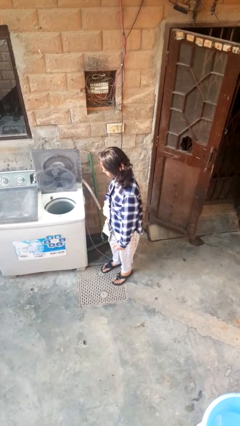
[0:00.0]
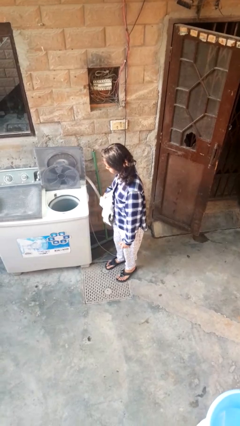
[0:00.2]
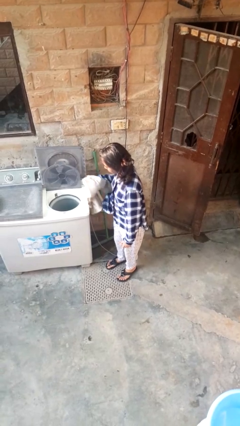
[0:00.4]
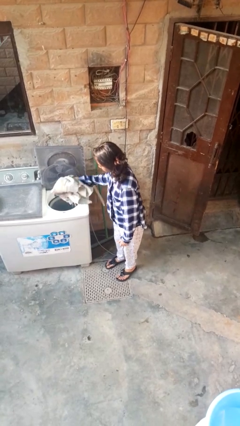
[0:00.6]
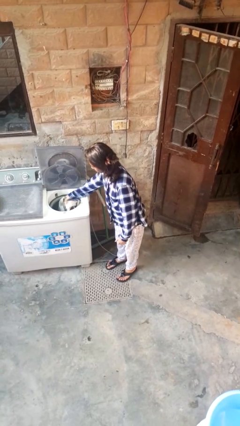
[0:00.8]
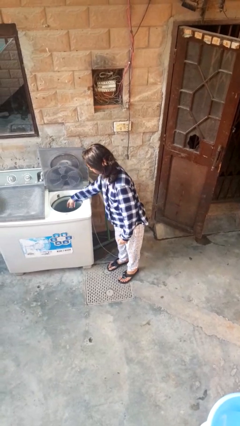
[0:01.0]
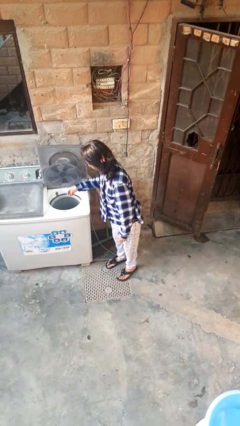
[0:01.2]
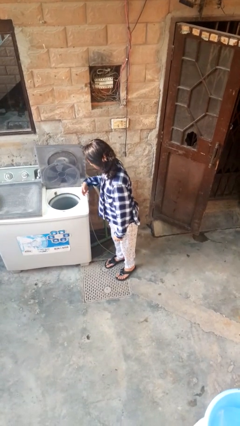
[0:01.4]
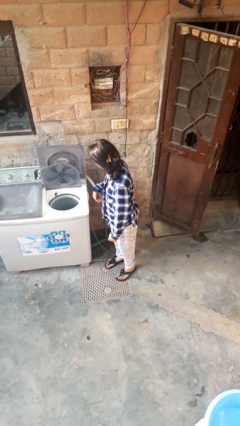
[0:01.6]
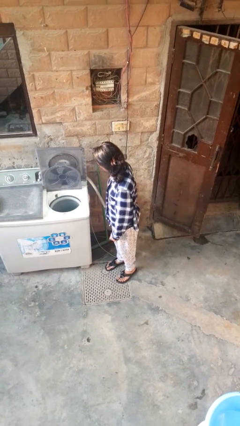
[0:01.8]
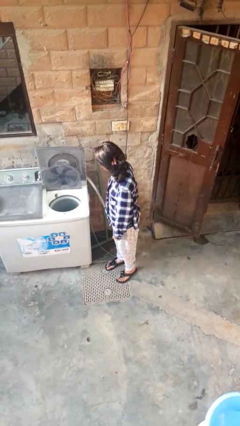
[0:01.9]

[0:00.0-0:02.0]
person loads dryer

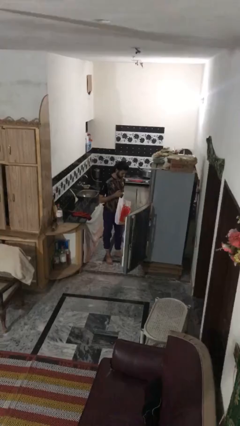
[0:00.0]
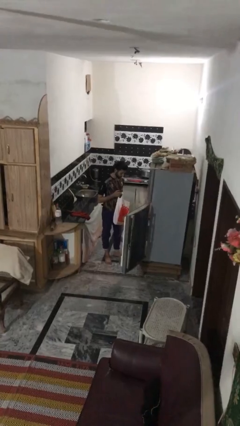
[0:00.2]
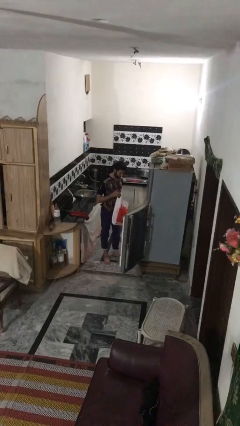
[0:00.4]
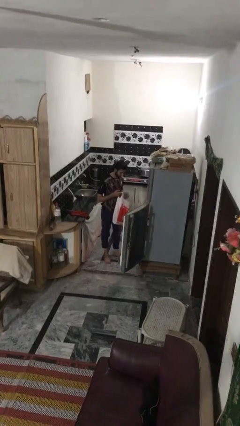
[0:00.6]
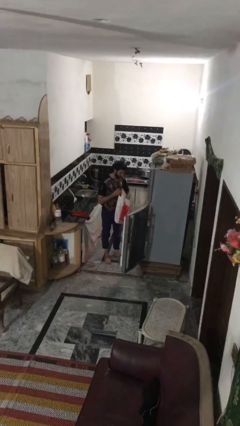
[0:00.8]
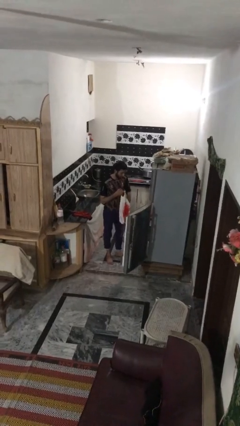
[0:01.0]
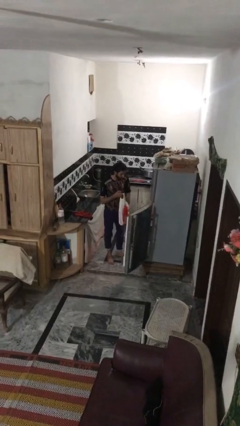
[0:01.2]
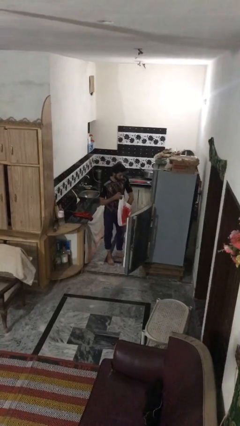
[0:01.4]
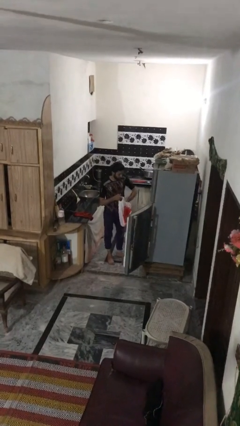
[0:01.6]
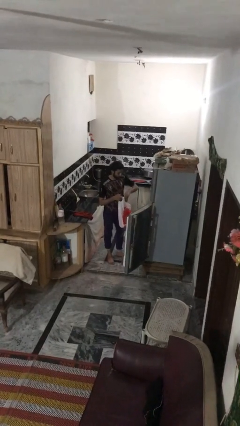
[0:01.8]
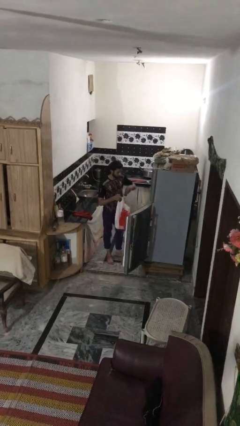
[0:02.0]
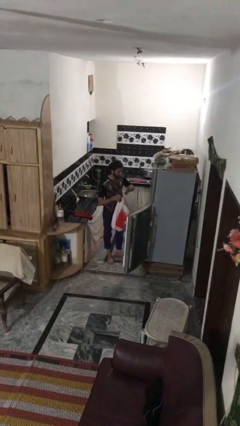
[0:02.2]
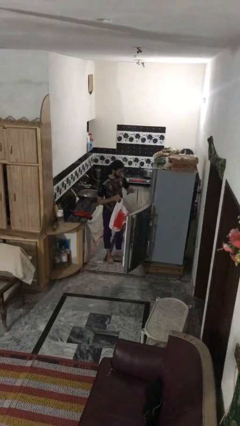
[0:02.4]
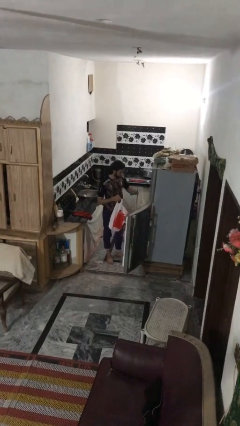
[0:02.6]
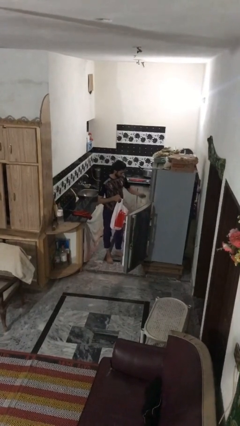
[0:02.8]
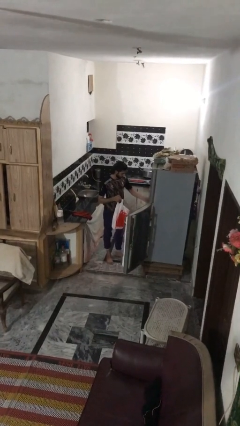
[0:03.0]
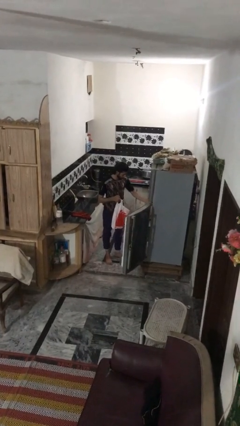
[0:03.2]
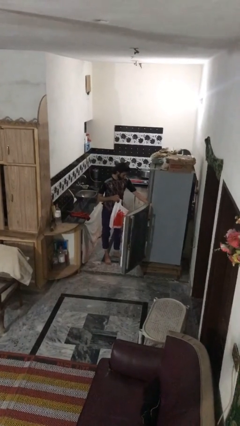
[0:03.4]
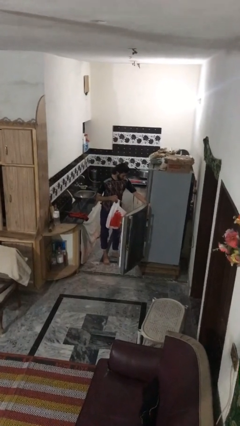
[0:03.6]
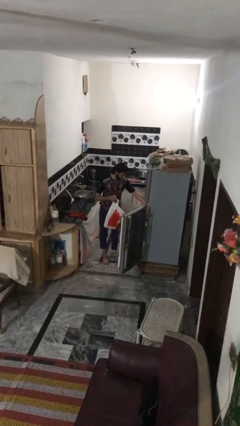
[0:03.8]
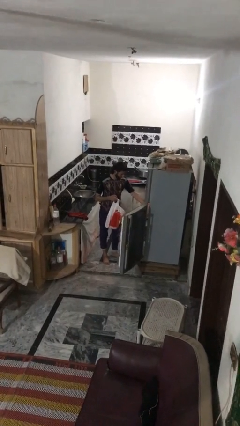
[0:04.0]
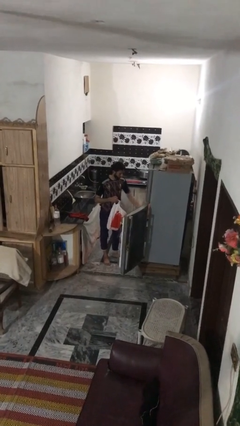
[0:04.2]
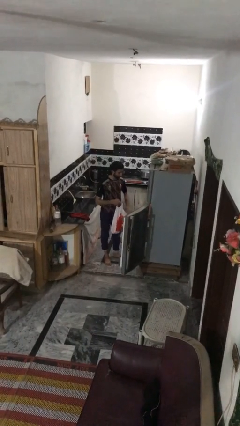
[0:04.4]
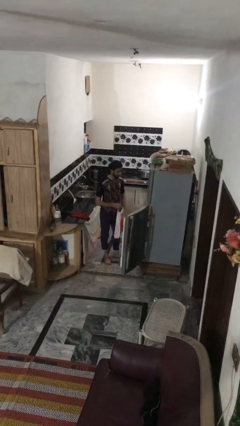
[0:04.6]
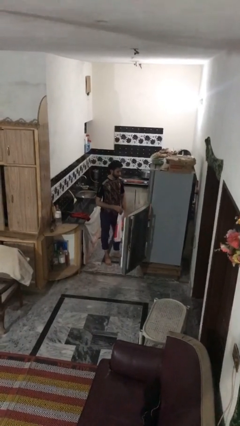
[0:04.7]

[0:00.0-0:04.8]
person loads groceries into refrigerator

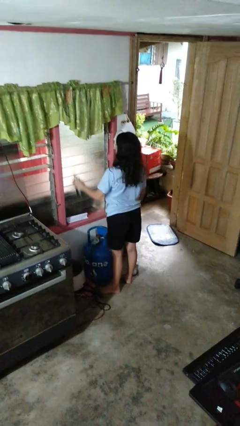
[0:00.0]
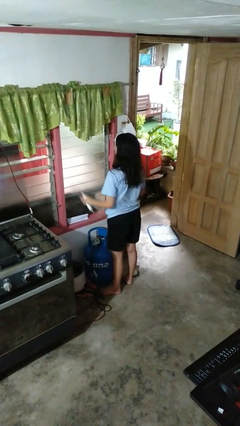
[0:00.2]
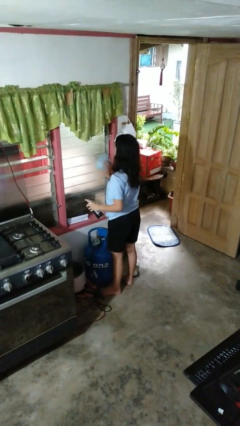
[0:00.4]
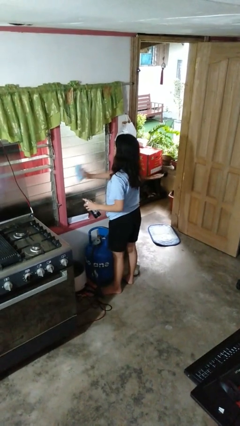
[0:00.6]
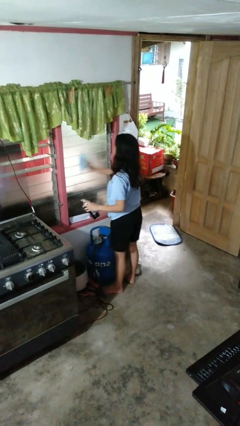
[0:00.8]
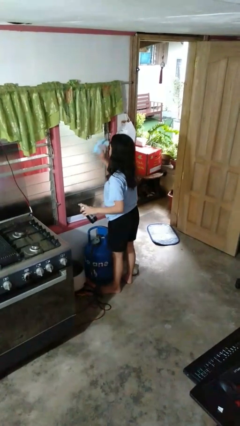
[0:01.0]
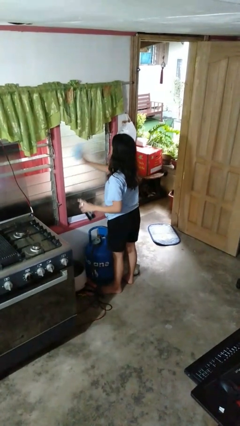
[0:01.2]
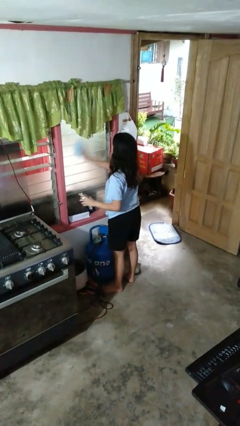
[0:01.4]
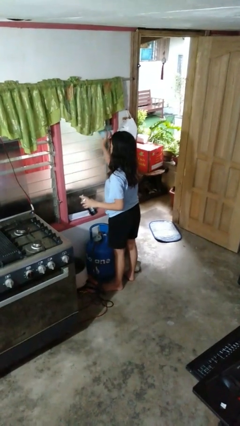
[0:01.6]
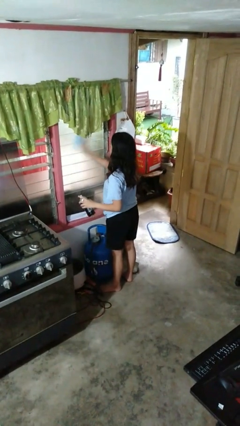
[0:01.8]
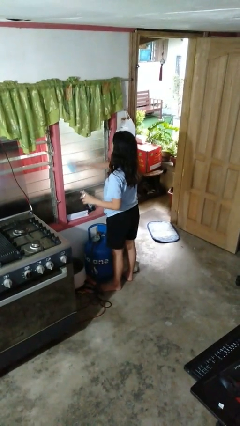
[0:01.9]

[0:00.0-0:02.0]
person washes window

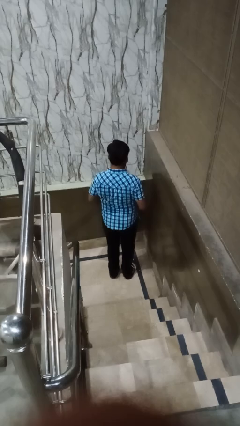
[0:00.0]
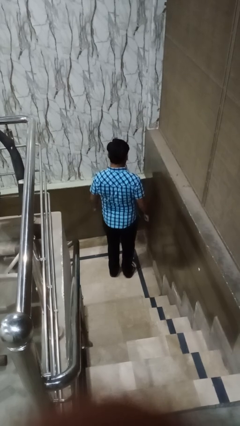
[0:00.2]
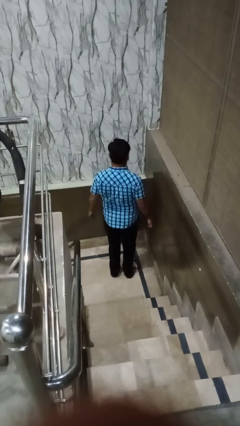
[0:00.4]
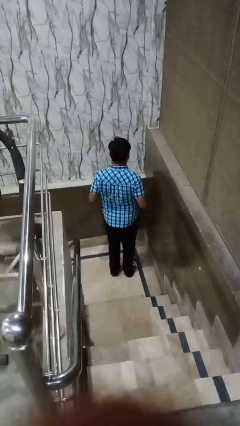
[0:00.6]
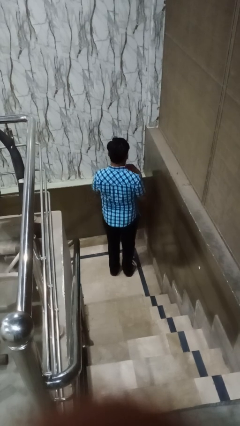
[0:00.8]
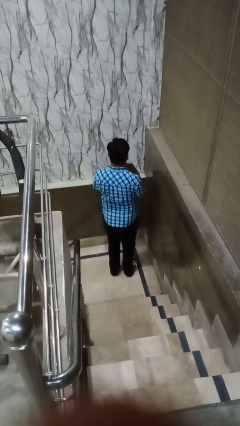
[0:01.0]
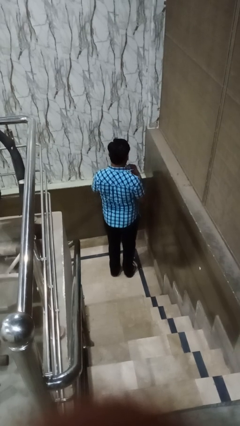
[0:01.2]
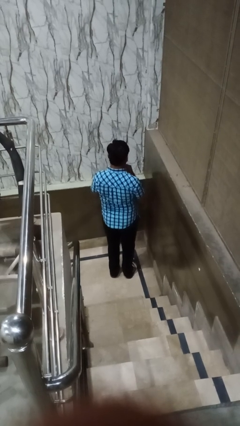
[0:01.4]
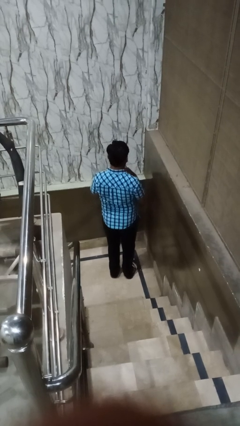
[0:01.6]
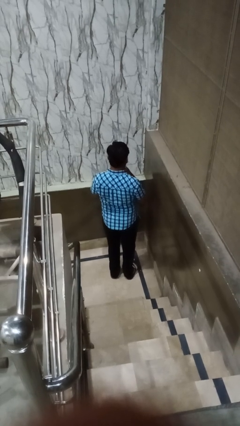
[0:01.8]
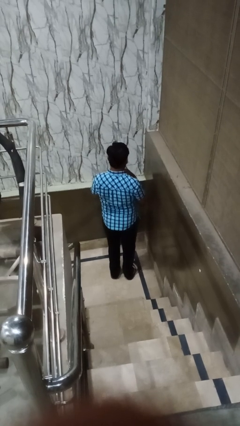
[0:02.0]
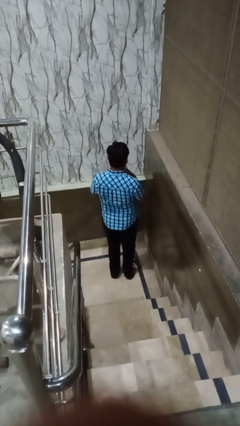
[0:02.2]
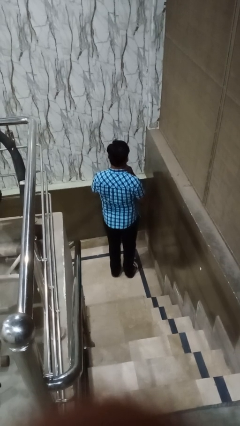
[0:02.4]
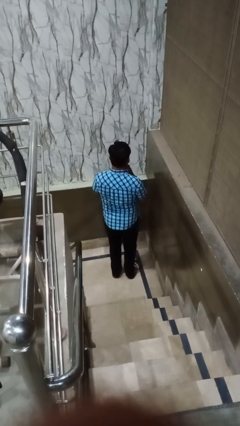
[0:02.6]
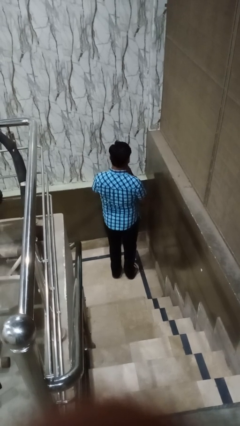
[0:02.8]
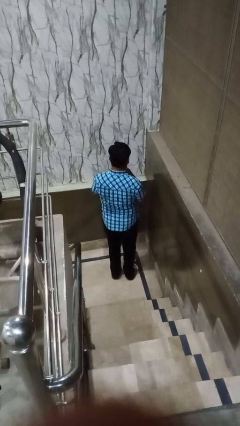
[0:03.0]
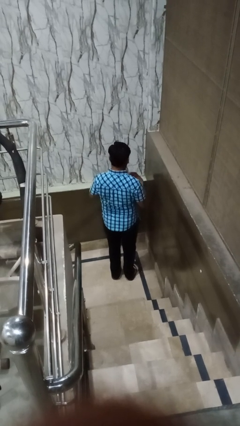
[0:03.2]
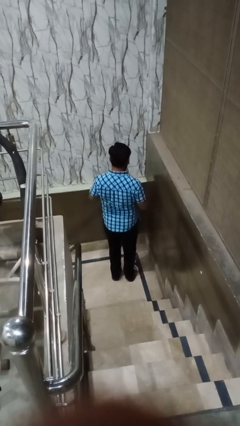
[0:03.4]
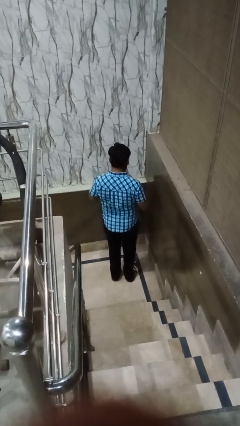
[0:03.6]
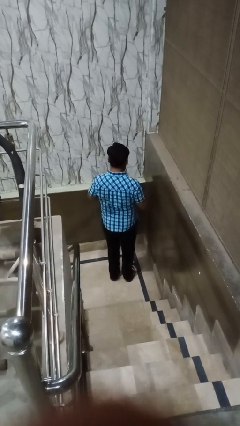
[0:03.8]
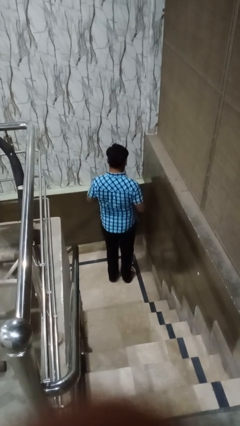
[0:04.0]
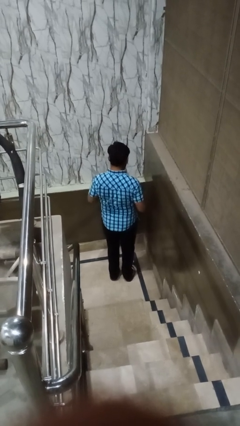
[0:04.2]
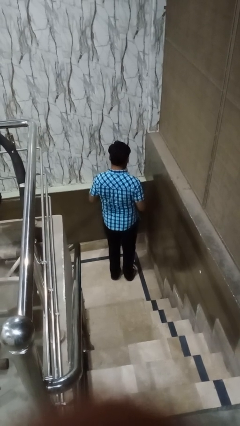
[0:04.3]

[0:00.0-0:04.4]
person buttons shirt

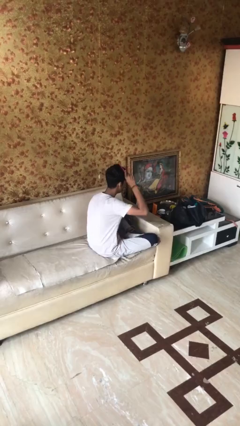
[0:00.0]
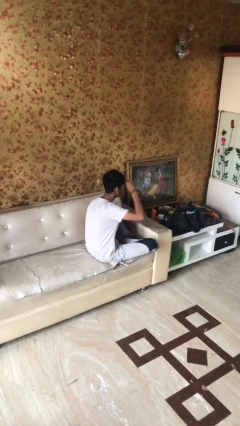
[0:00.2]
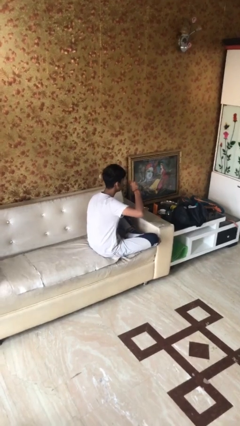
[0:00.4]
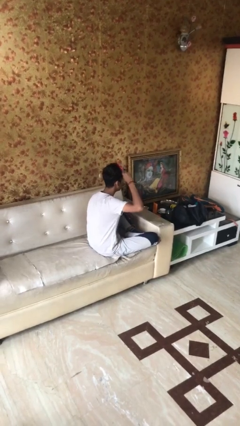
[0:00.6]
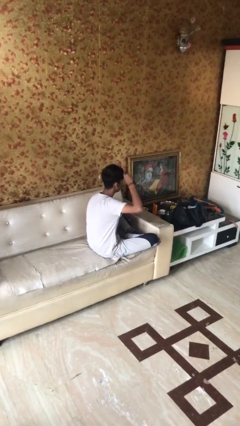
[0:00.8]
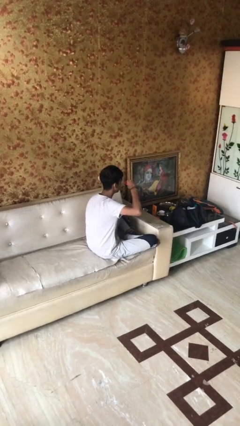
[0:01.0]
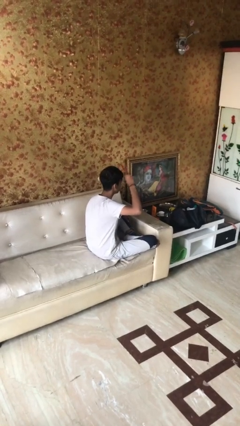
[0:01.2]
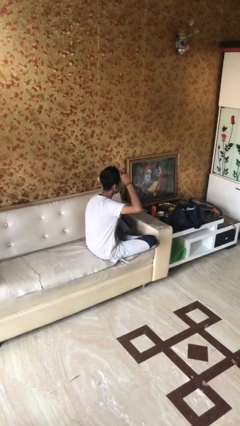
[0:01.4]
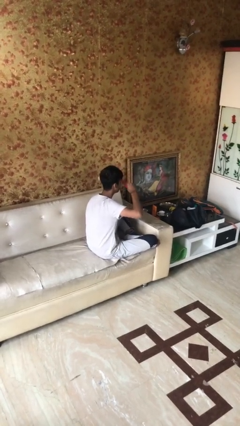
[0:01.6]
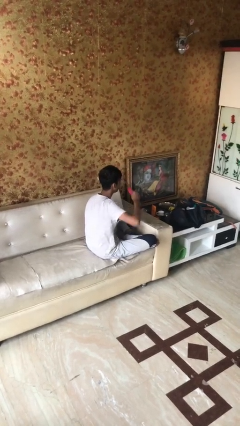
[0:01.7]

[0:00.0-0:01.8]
person brushes hair

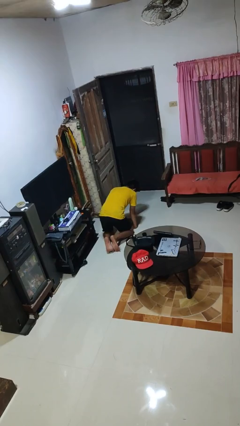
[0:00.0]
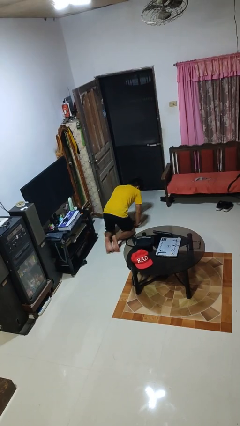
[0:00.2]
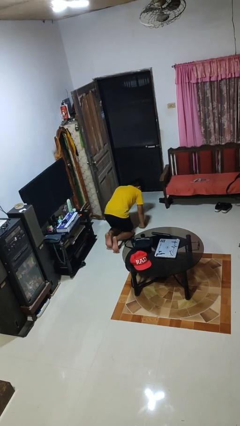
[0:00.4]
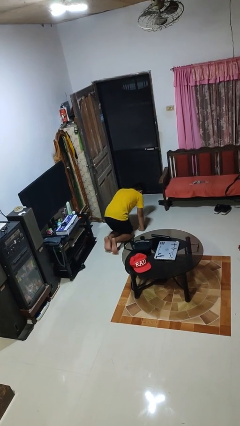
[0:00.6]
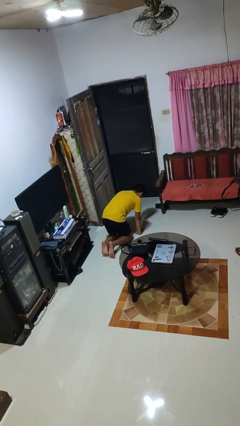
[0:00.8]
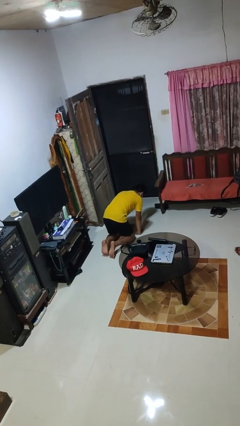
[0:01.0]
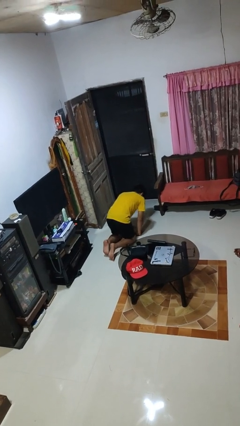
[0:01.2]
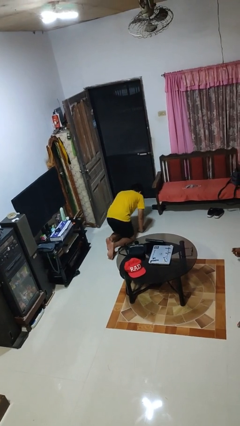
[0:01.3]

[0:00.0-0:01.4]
person crawls

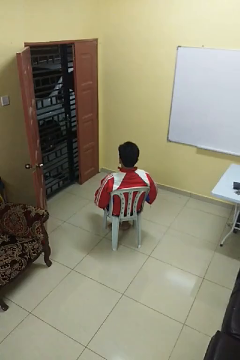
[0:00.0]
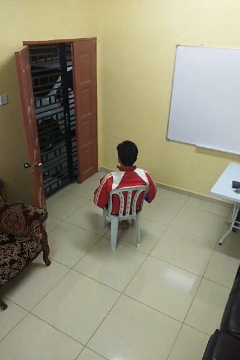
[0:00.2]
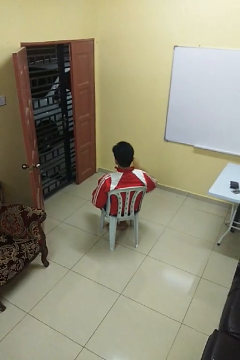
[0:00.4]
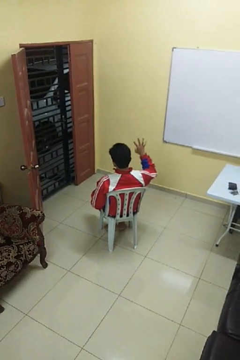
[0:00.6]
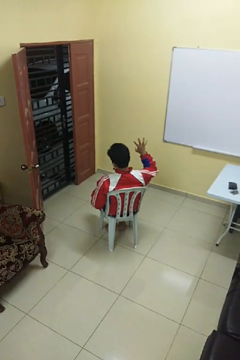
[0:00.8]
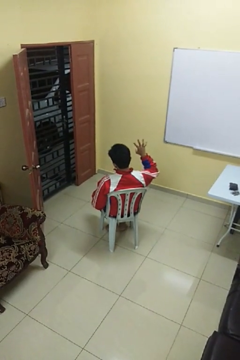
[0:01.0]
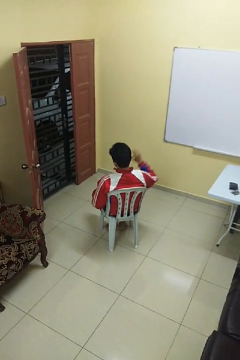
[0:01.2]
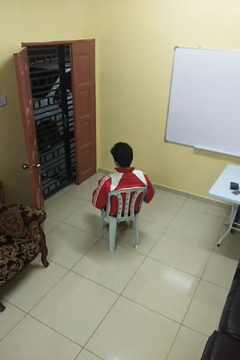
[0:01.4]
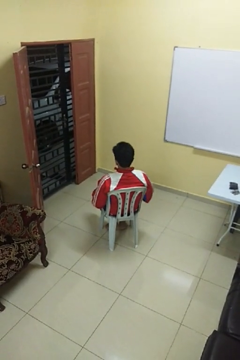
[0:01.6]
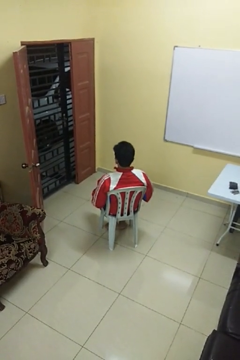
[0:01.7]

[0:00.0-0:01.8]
person gestures number four
